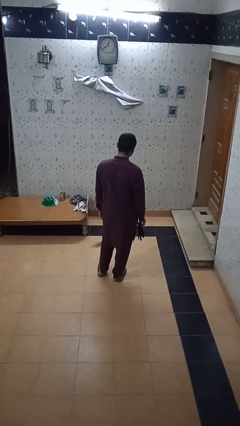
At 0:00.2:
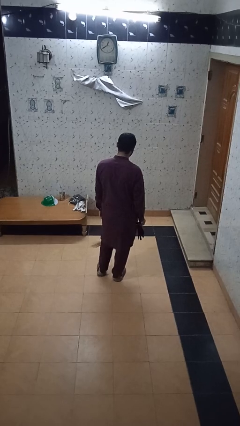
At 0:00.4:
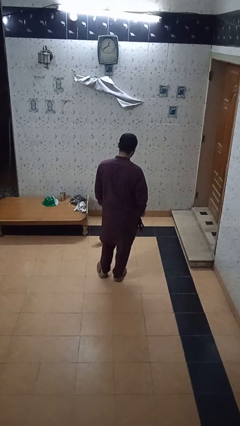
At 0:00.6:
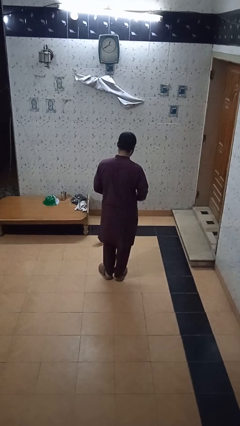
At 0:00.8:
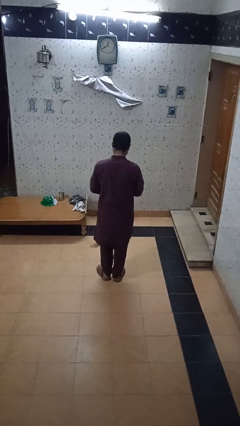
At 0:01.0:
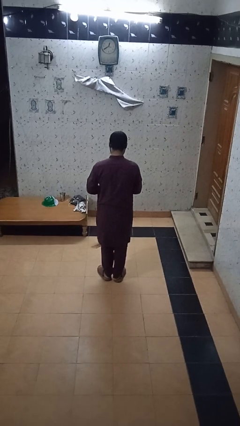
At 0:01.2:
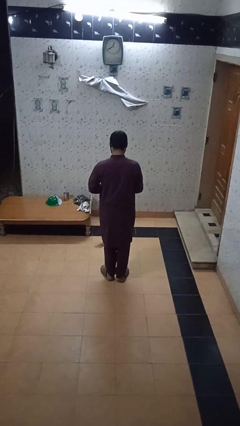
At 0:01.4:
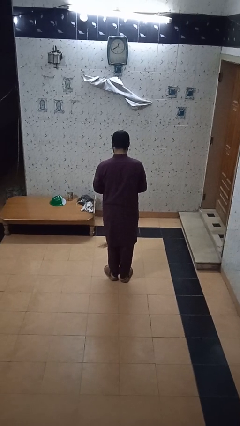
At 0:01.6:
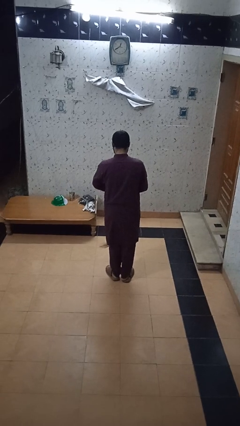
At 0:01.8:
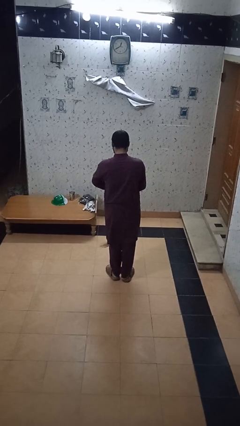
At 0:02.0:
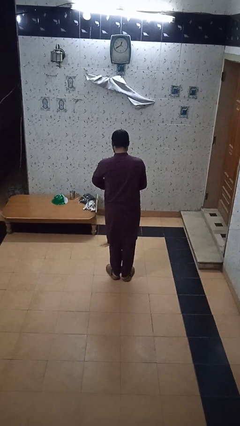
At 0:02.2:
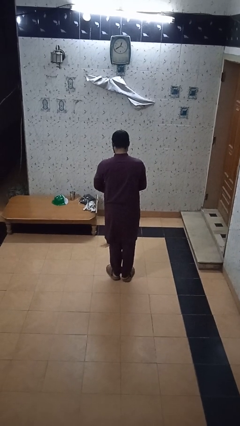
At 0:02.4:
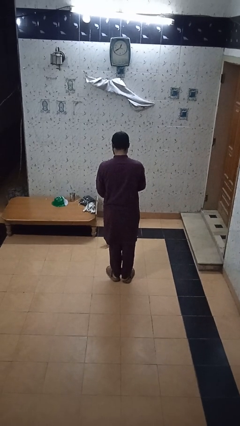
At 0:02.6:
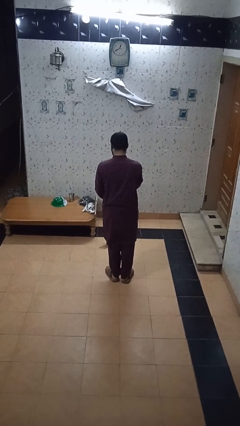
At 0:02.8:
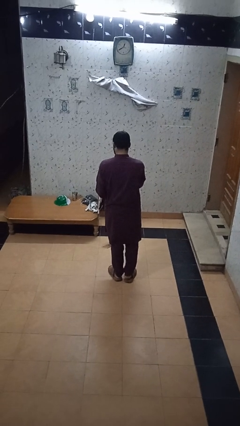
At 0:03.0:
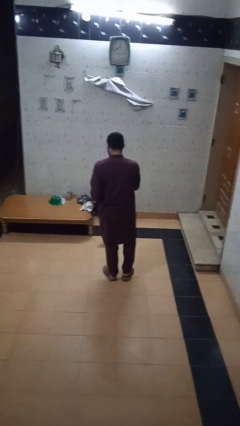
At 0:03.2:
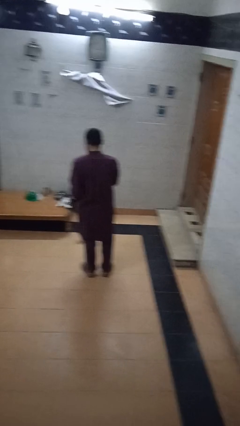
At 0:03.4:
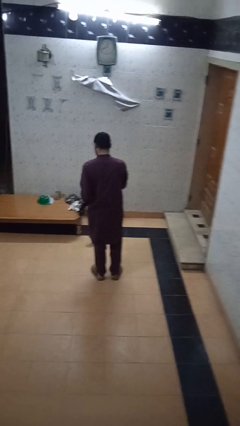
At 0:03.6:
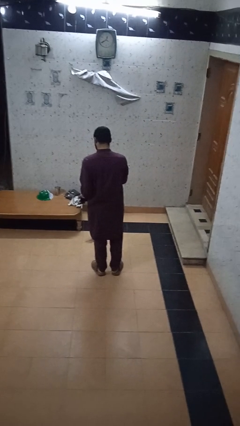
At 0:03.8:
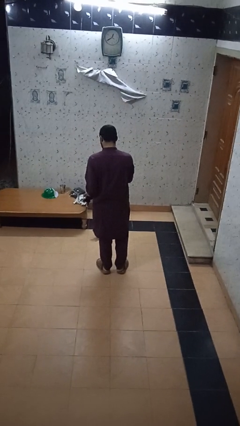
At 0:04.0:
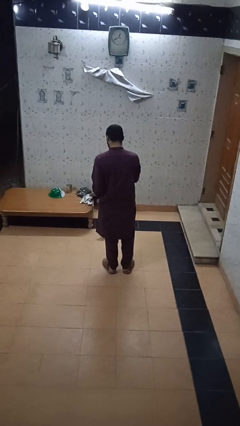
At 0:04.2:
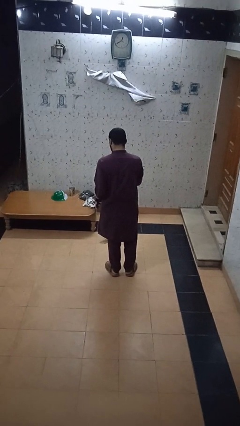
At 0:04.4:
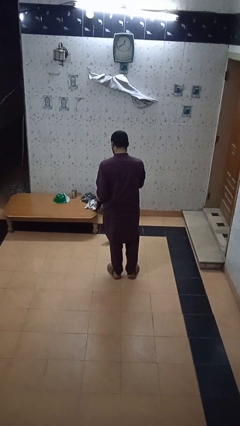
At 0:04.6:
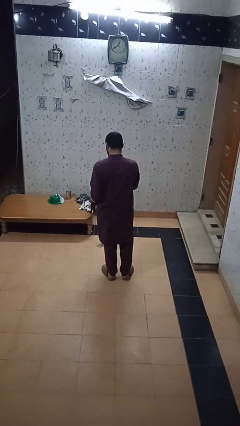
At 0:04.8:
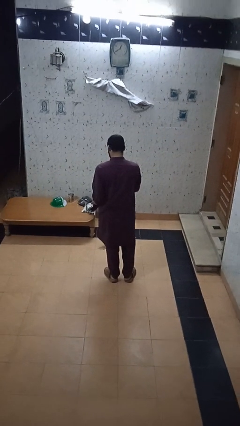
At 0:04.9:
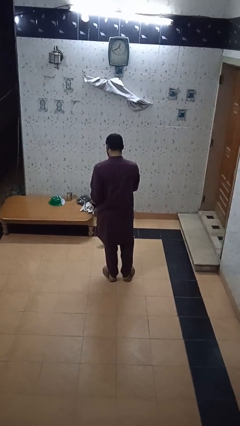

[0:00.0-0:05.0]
person puts on gloves

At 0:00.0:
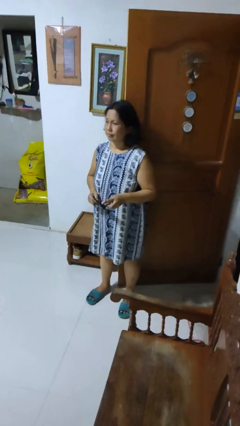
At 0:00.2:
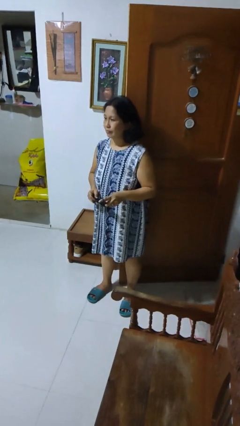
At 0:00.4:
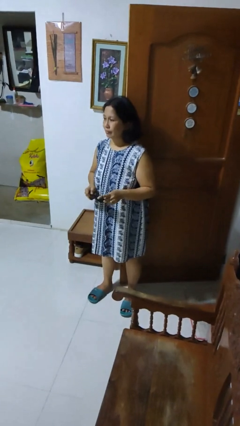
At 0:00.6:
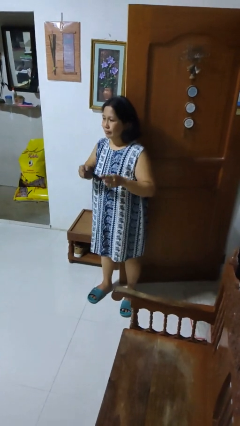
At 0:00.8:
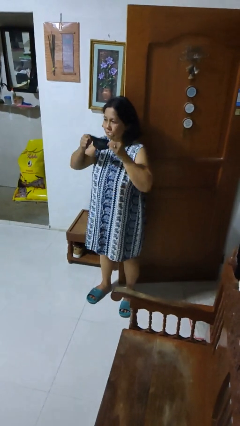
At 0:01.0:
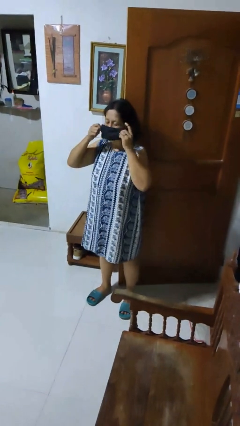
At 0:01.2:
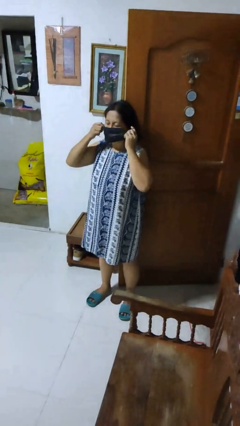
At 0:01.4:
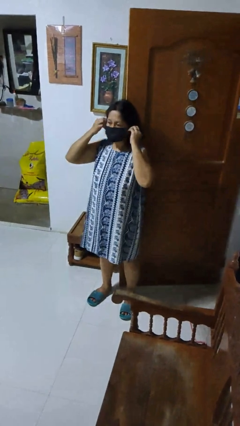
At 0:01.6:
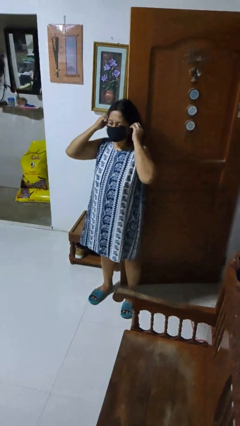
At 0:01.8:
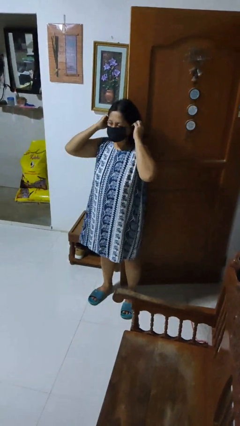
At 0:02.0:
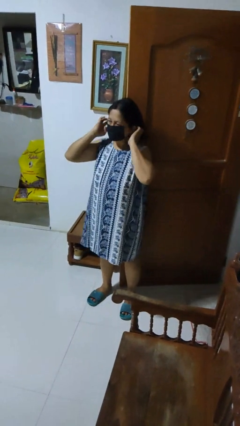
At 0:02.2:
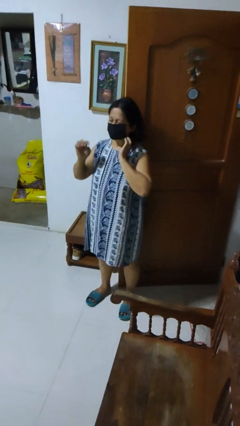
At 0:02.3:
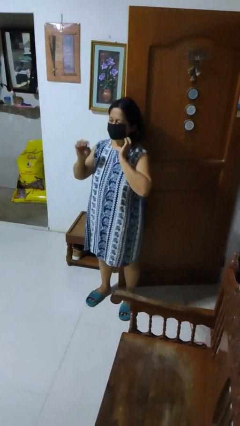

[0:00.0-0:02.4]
person puts on facemask

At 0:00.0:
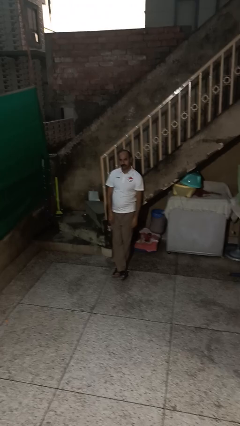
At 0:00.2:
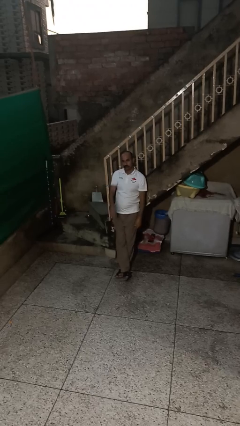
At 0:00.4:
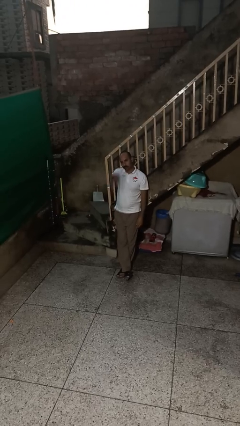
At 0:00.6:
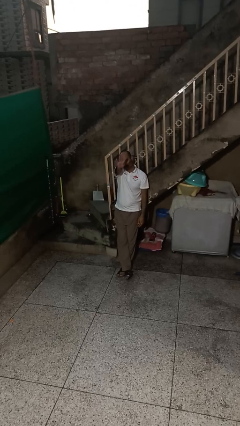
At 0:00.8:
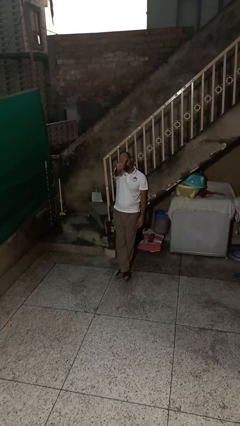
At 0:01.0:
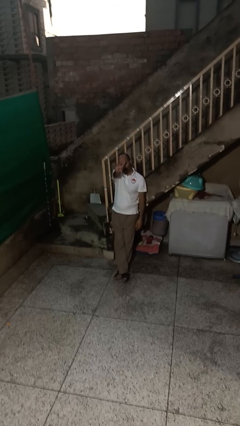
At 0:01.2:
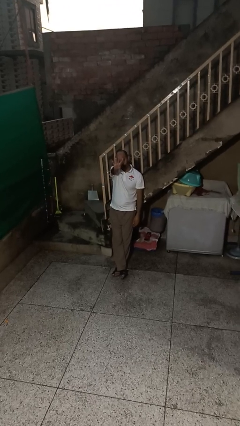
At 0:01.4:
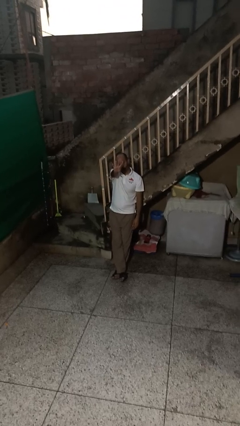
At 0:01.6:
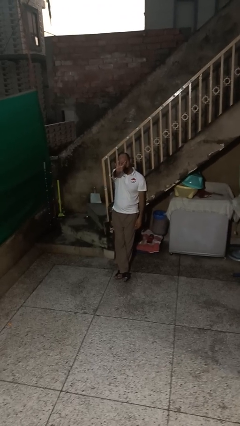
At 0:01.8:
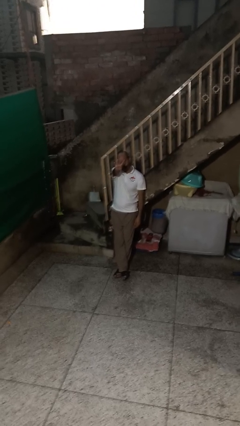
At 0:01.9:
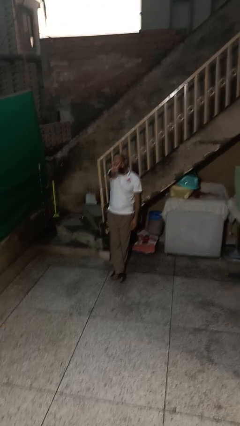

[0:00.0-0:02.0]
person gestures number four

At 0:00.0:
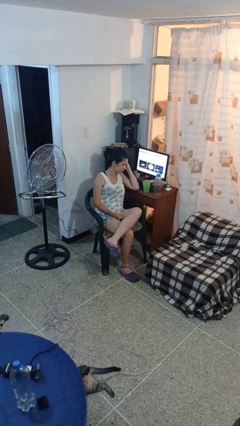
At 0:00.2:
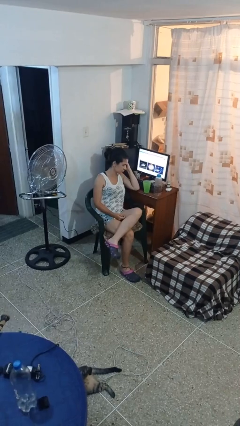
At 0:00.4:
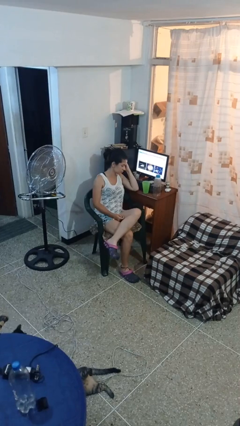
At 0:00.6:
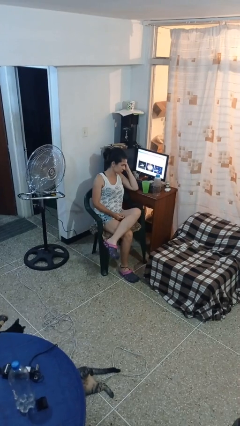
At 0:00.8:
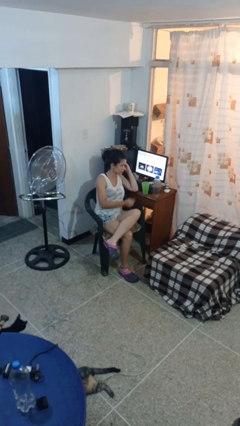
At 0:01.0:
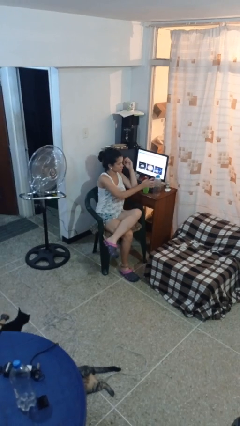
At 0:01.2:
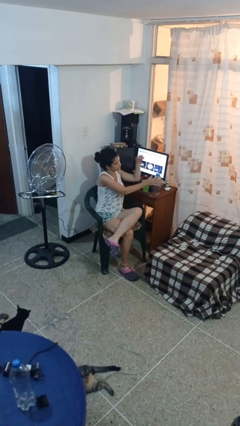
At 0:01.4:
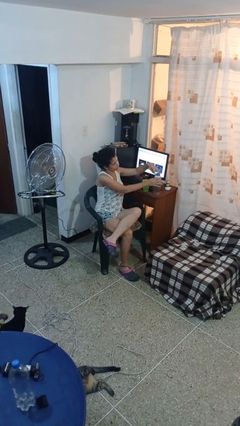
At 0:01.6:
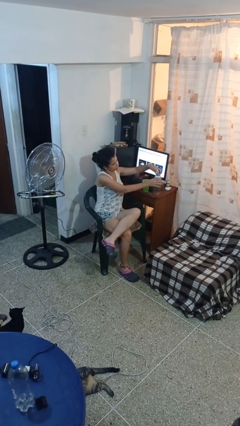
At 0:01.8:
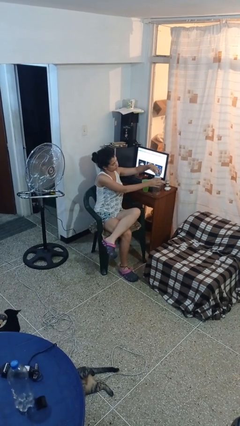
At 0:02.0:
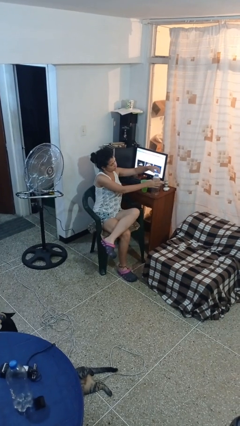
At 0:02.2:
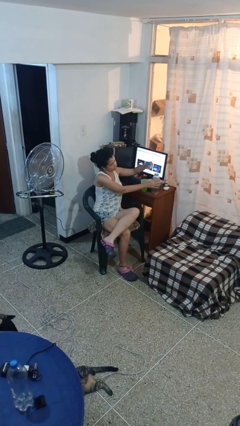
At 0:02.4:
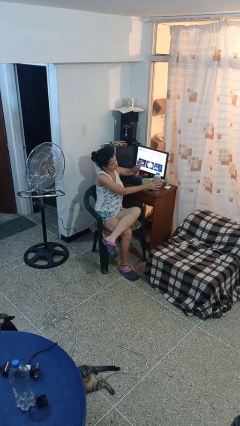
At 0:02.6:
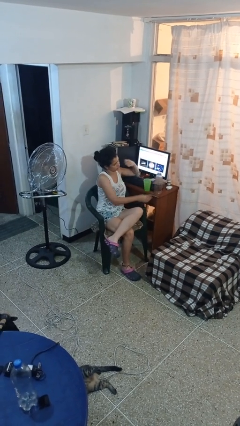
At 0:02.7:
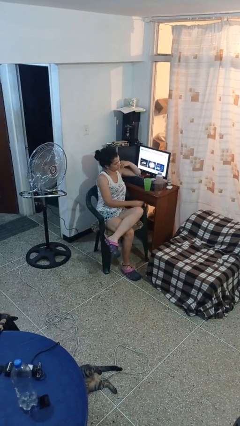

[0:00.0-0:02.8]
person unscrews lid from bottle

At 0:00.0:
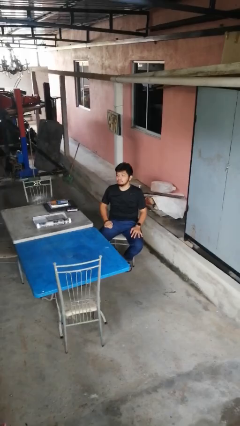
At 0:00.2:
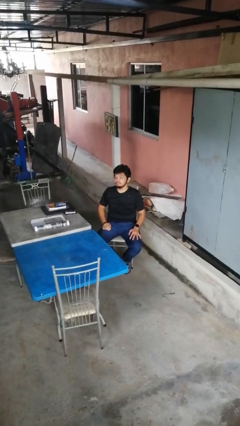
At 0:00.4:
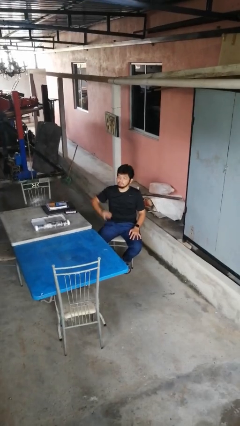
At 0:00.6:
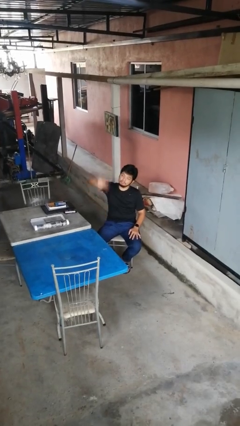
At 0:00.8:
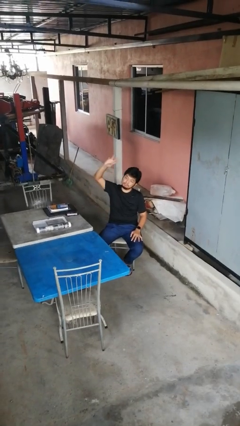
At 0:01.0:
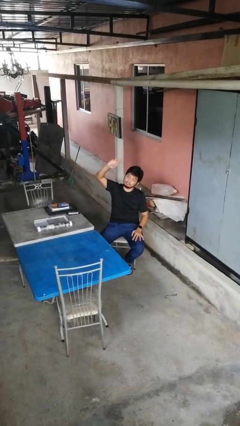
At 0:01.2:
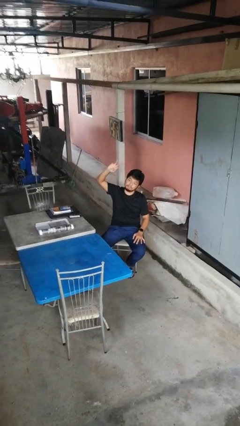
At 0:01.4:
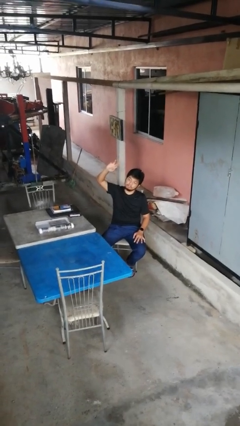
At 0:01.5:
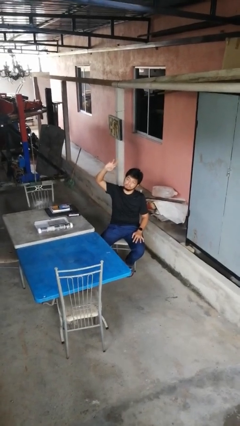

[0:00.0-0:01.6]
person gestures swipe up

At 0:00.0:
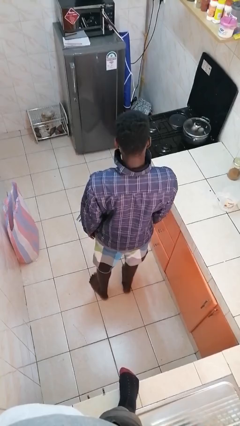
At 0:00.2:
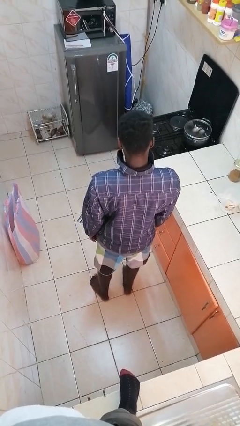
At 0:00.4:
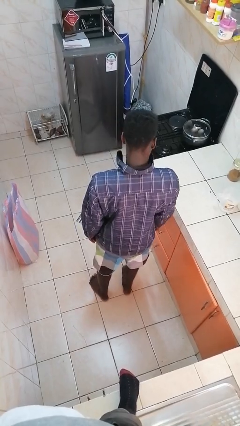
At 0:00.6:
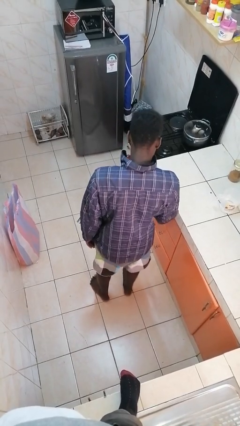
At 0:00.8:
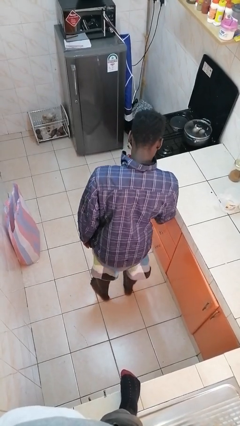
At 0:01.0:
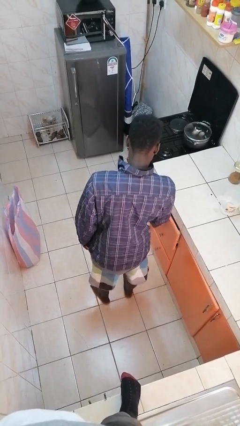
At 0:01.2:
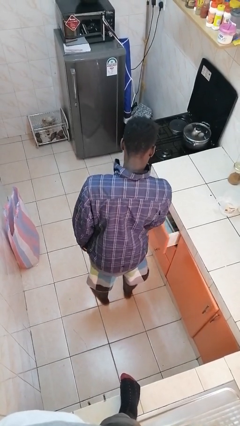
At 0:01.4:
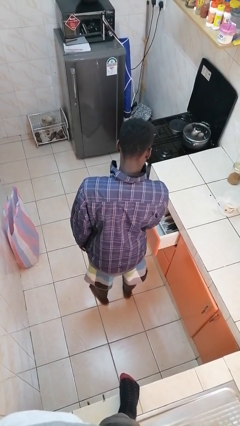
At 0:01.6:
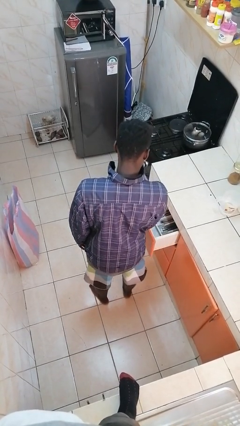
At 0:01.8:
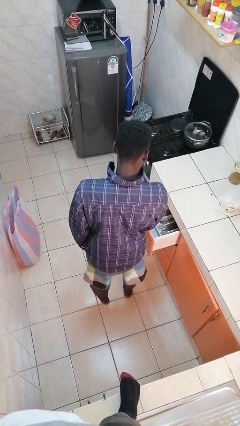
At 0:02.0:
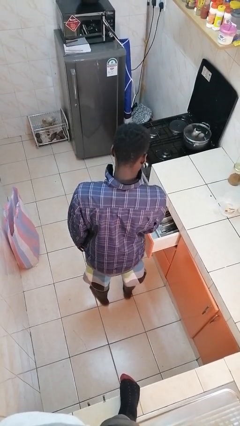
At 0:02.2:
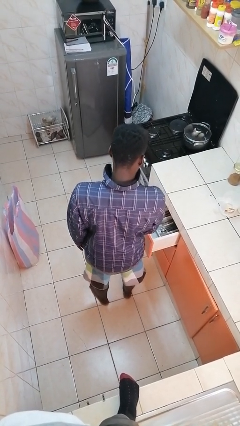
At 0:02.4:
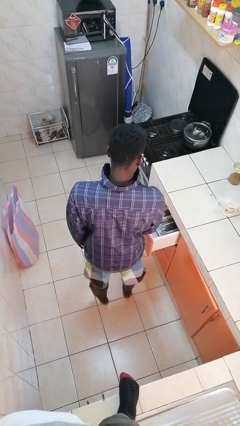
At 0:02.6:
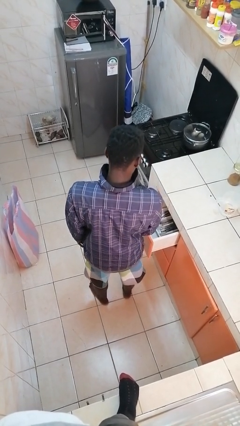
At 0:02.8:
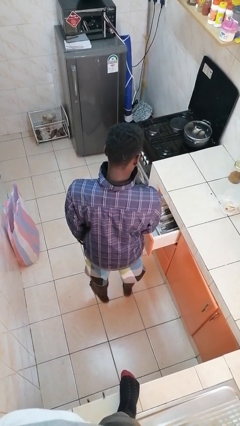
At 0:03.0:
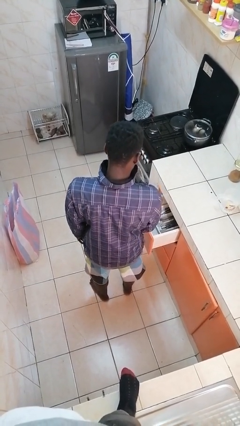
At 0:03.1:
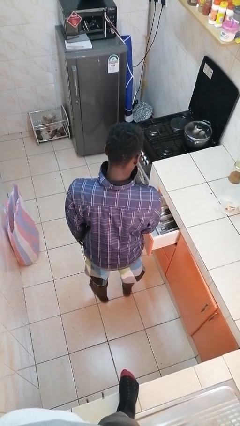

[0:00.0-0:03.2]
person opens kitchen drawer

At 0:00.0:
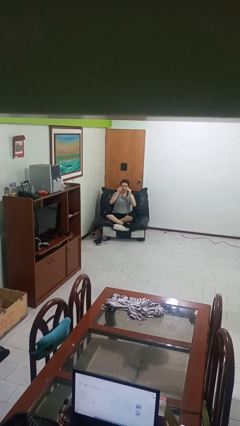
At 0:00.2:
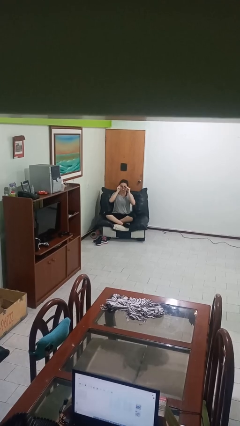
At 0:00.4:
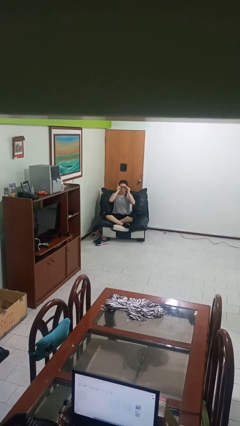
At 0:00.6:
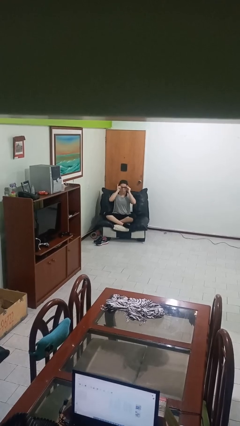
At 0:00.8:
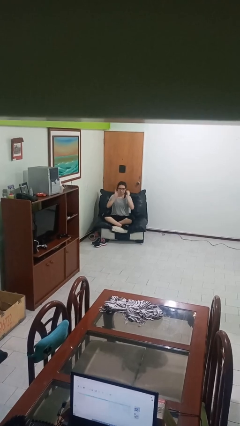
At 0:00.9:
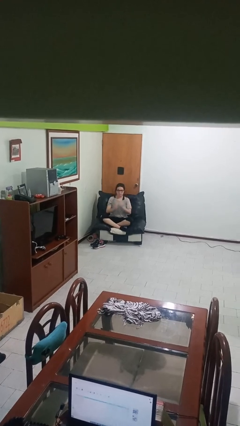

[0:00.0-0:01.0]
person puts on glasses
